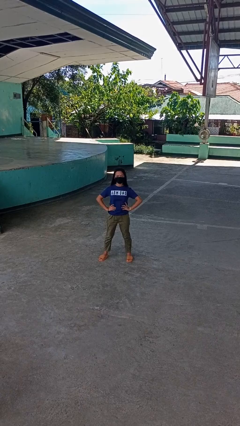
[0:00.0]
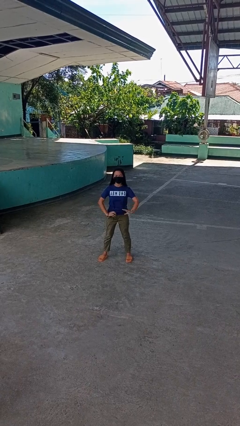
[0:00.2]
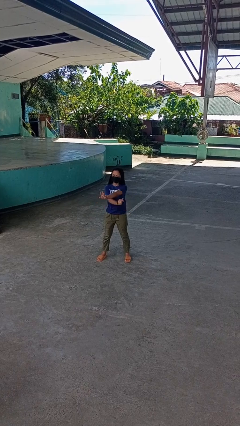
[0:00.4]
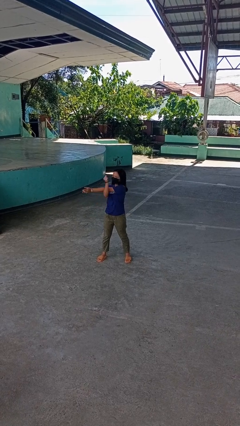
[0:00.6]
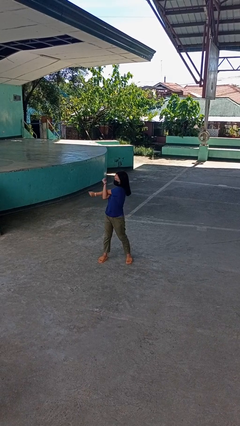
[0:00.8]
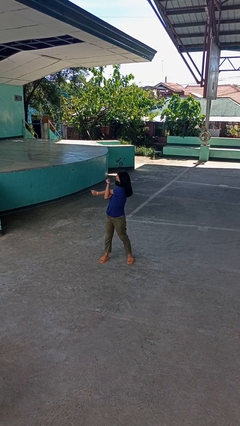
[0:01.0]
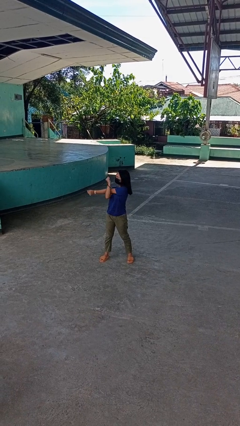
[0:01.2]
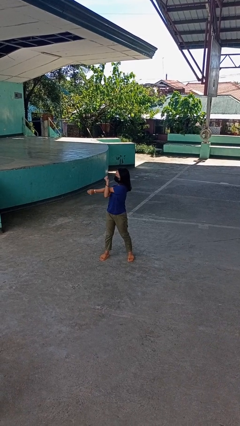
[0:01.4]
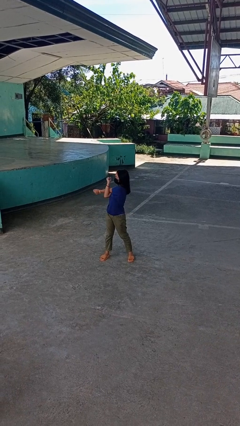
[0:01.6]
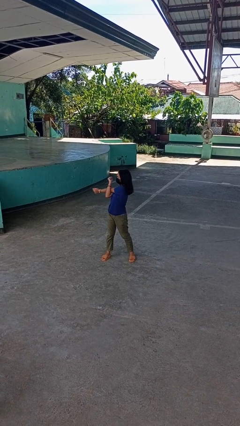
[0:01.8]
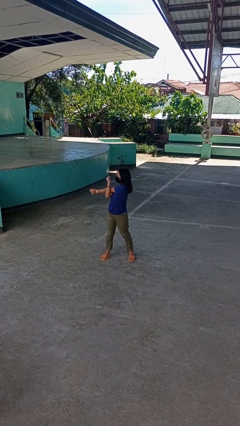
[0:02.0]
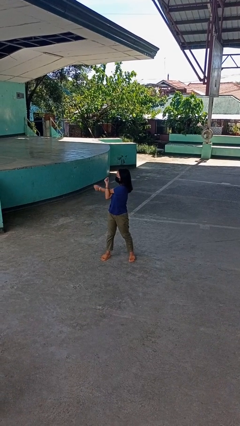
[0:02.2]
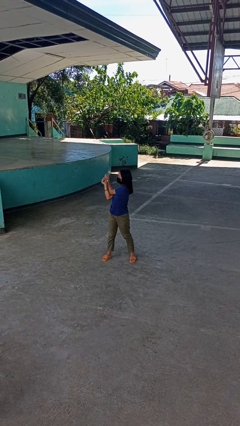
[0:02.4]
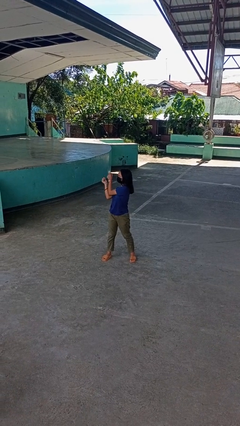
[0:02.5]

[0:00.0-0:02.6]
person stretches arms to side

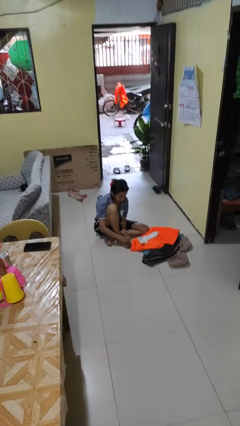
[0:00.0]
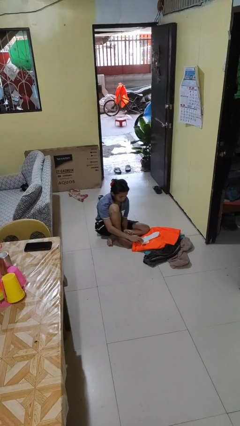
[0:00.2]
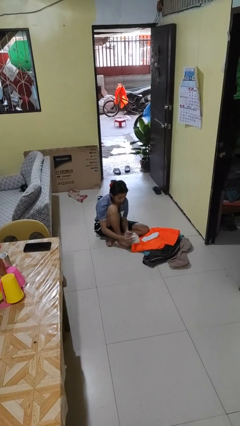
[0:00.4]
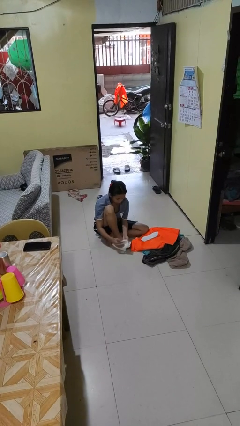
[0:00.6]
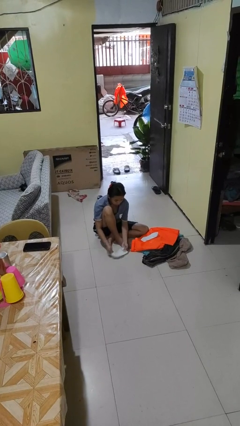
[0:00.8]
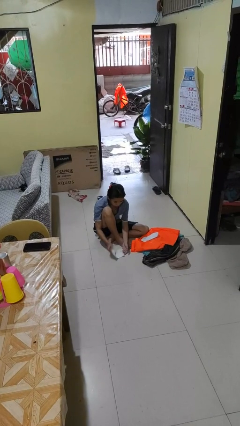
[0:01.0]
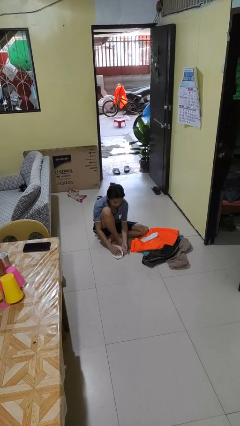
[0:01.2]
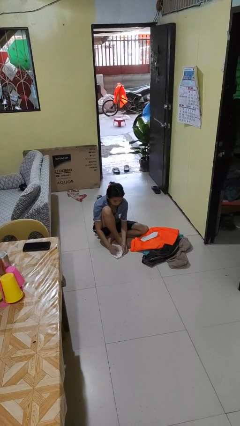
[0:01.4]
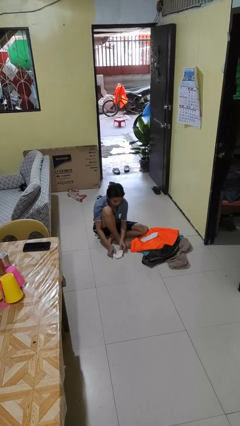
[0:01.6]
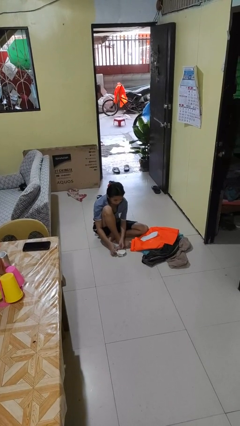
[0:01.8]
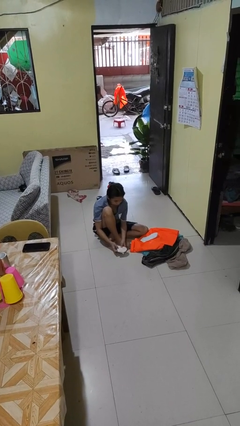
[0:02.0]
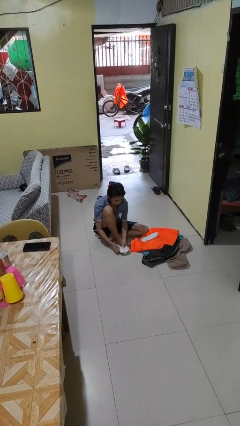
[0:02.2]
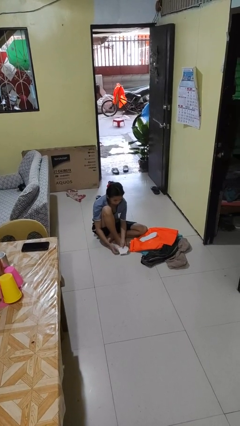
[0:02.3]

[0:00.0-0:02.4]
person folds socks

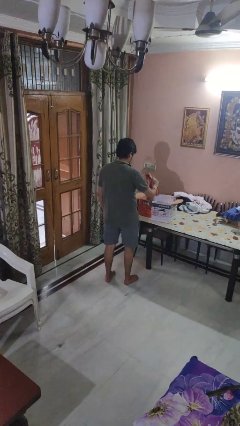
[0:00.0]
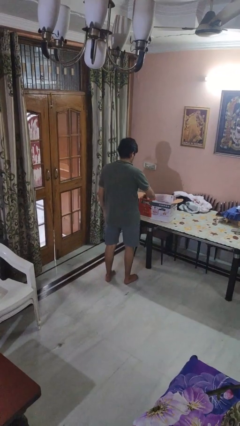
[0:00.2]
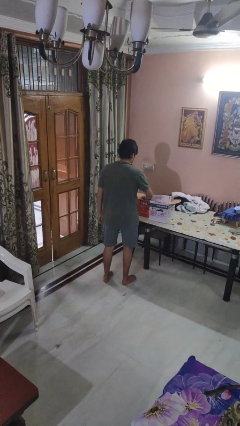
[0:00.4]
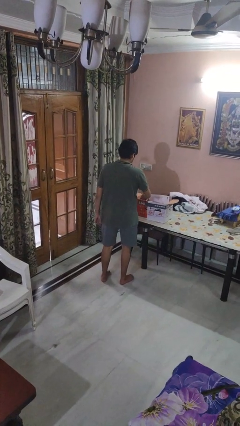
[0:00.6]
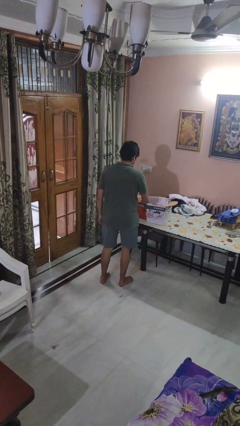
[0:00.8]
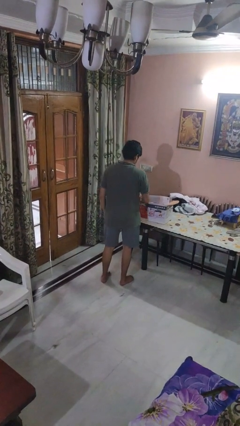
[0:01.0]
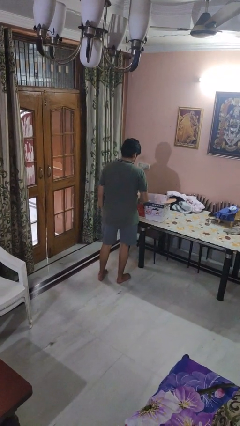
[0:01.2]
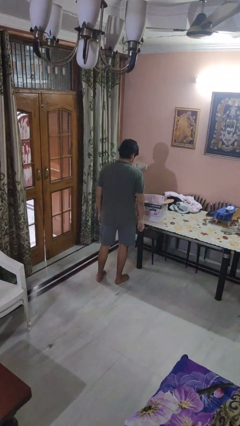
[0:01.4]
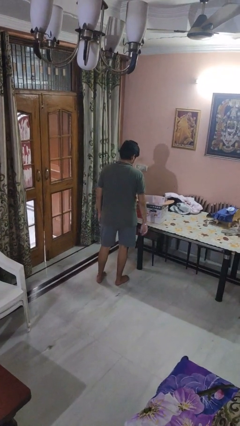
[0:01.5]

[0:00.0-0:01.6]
person puts object into box

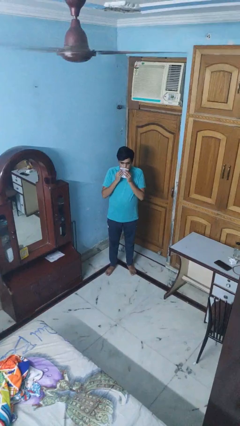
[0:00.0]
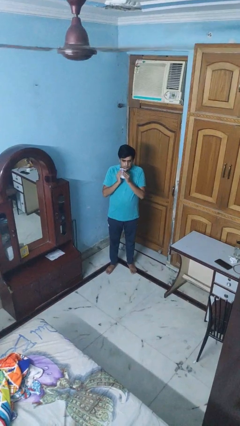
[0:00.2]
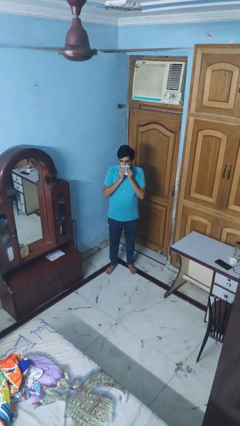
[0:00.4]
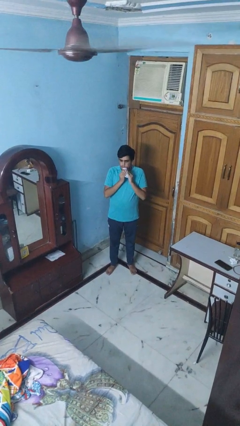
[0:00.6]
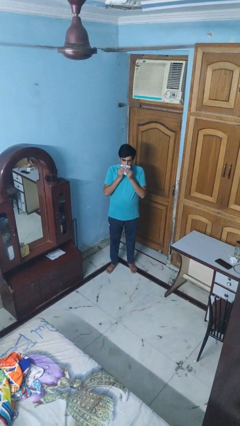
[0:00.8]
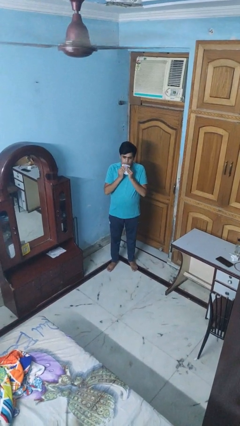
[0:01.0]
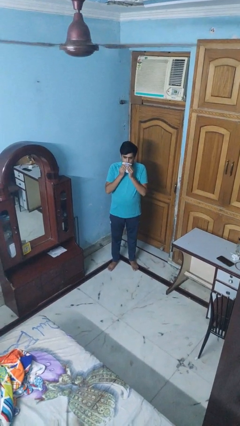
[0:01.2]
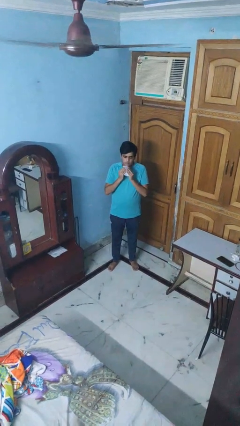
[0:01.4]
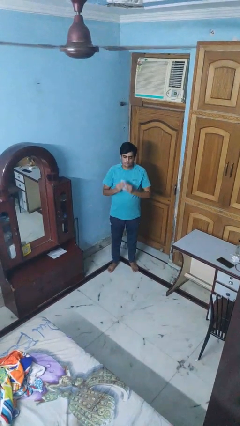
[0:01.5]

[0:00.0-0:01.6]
person wipes mouth with napkin

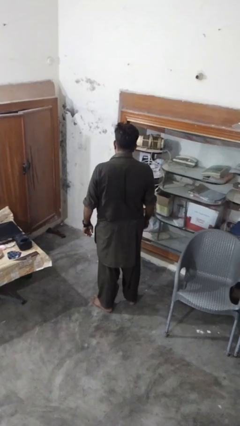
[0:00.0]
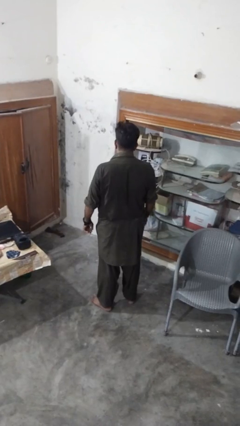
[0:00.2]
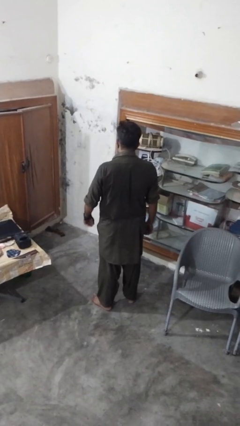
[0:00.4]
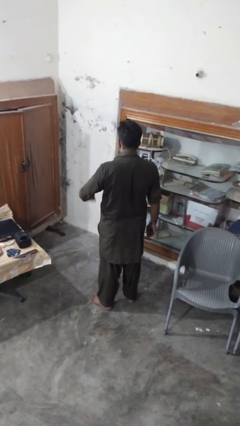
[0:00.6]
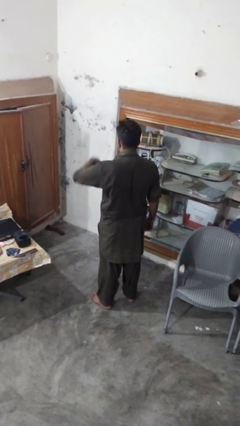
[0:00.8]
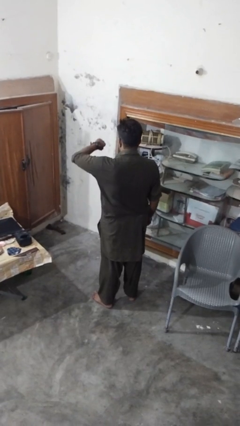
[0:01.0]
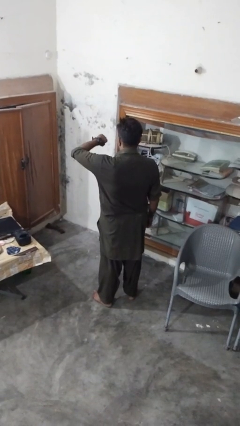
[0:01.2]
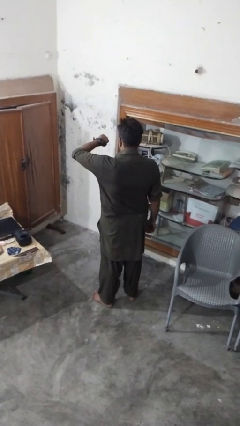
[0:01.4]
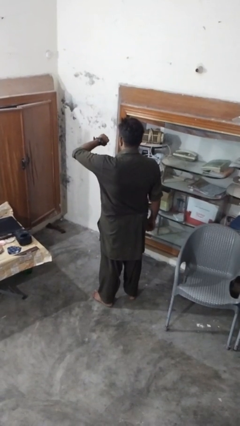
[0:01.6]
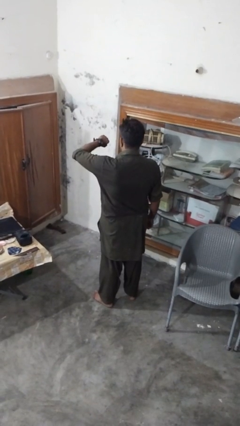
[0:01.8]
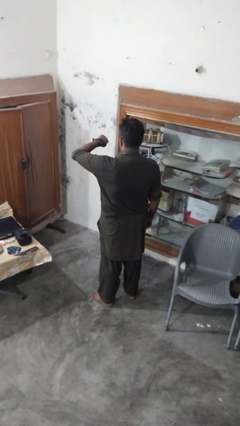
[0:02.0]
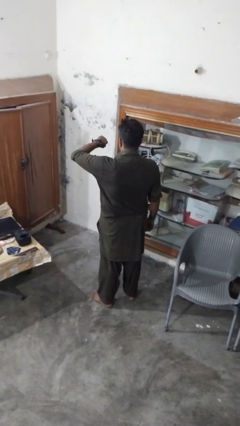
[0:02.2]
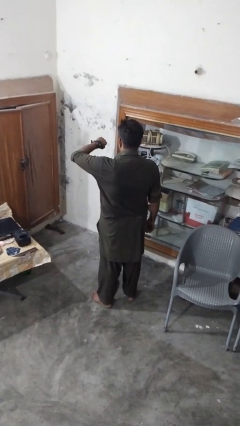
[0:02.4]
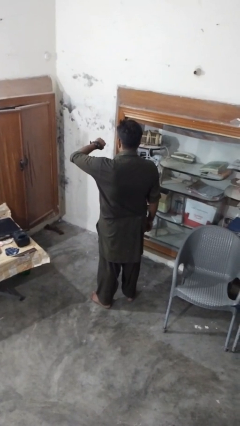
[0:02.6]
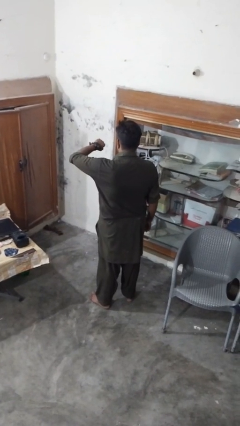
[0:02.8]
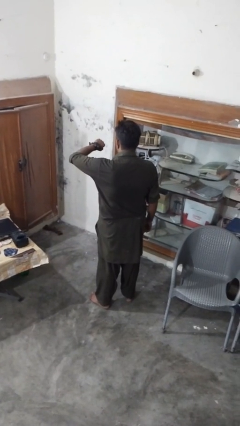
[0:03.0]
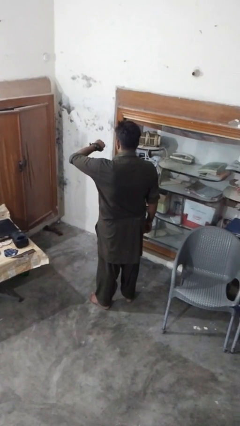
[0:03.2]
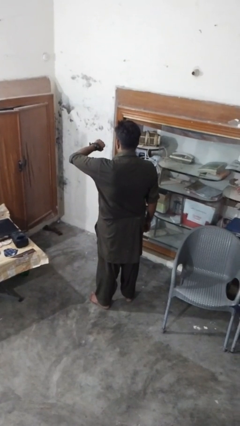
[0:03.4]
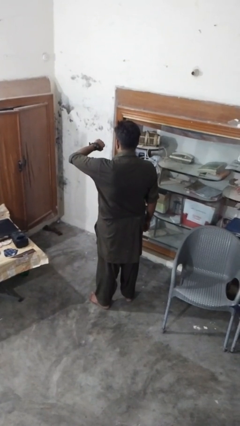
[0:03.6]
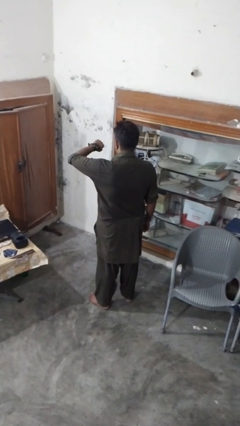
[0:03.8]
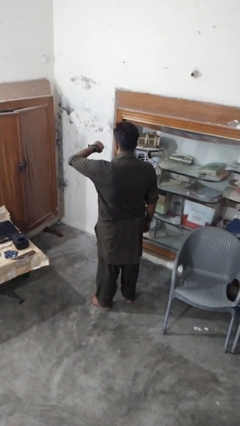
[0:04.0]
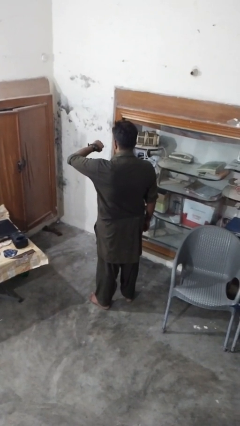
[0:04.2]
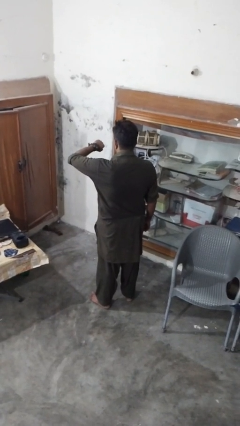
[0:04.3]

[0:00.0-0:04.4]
person looks at wristwatch

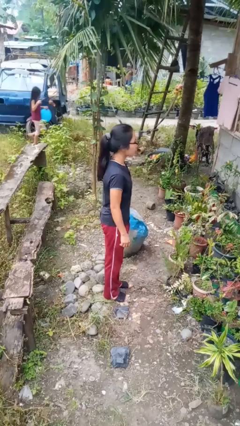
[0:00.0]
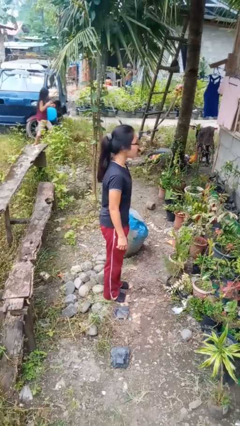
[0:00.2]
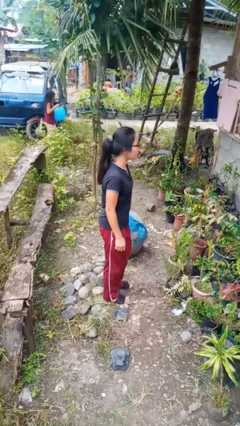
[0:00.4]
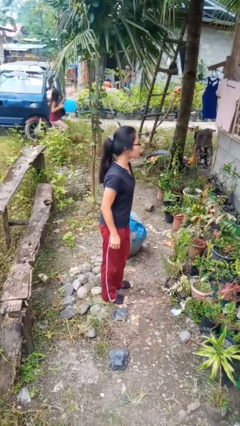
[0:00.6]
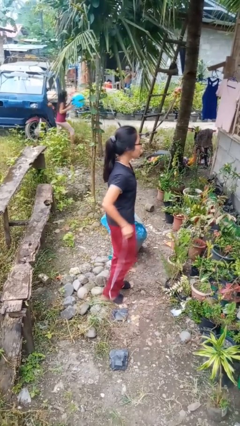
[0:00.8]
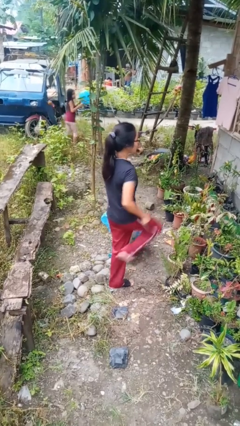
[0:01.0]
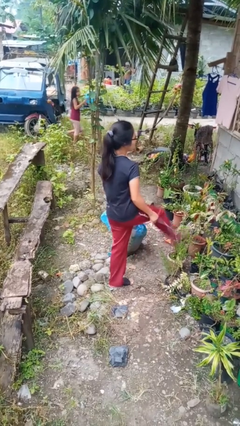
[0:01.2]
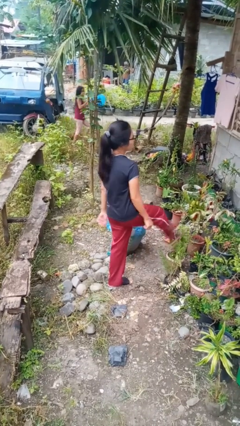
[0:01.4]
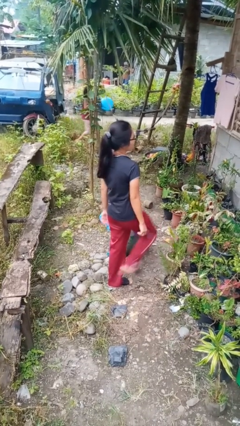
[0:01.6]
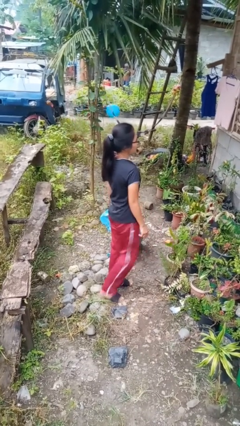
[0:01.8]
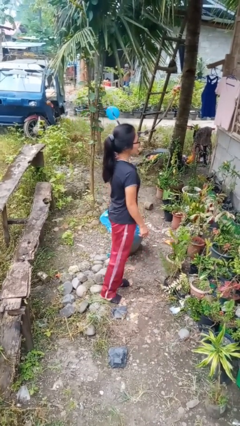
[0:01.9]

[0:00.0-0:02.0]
person karate kicks

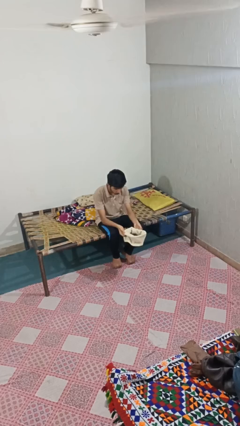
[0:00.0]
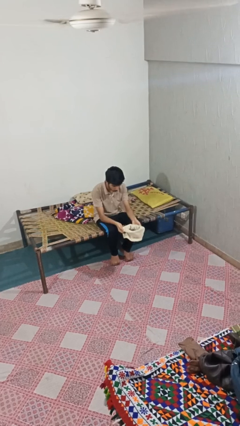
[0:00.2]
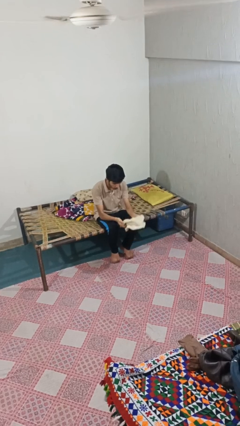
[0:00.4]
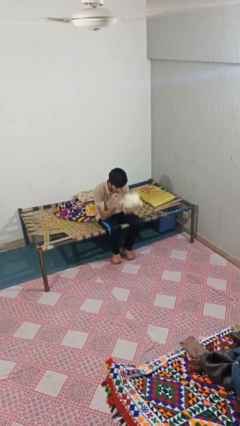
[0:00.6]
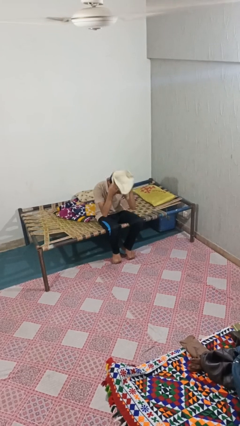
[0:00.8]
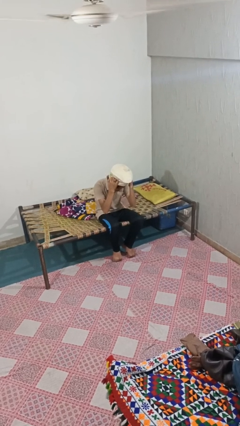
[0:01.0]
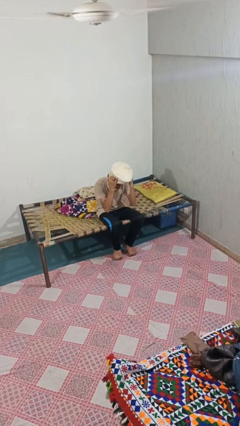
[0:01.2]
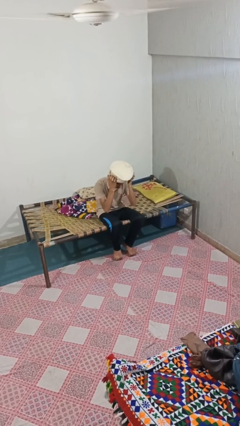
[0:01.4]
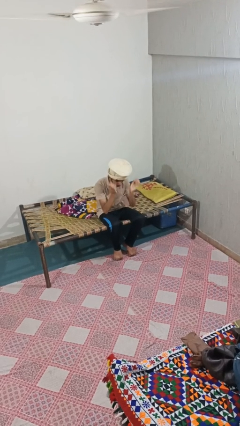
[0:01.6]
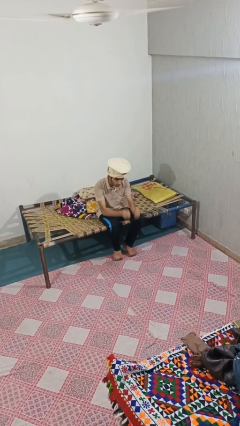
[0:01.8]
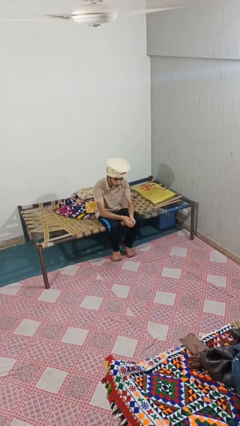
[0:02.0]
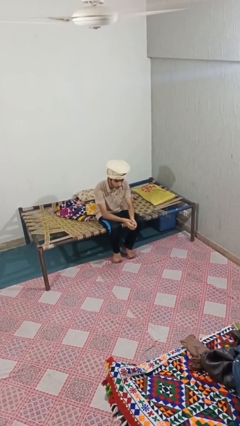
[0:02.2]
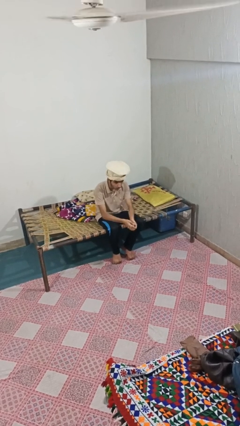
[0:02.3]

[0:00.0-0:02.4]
person puts on hat
